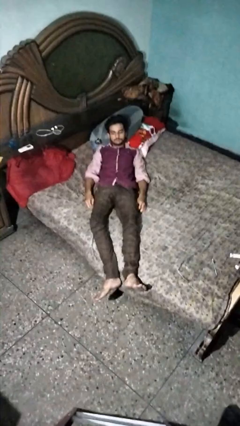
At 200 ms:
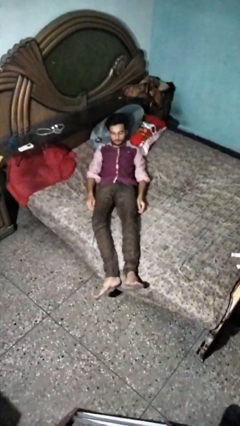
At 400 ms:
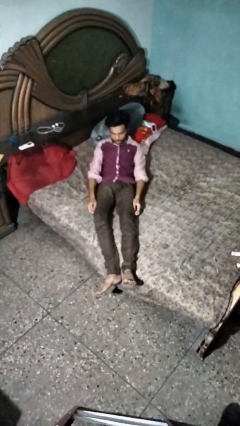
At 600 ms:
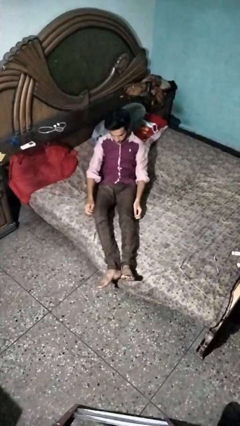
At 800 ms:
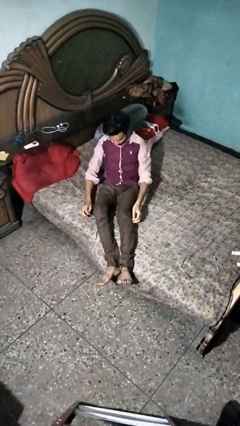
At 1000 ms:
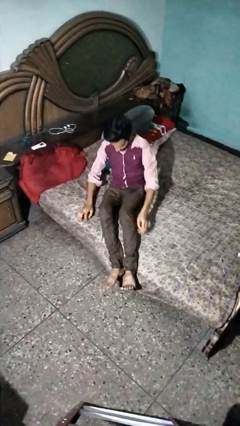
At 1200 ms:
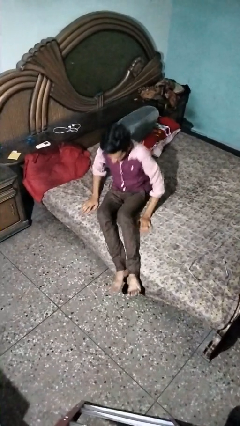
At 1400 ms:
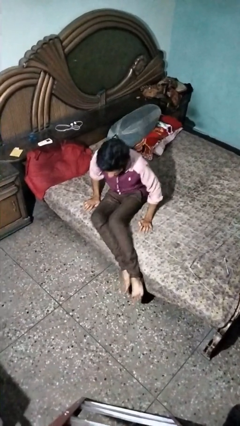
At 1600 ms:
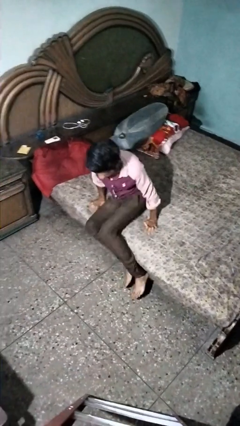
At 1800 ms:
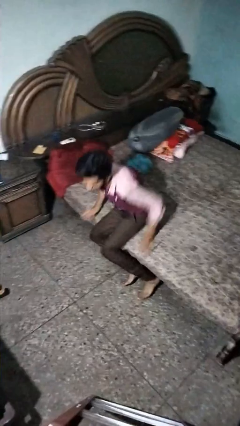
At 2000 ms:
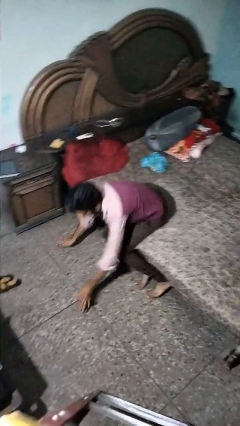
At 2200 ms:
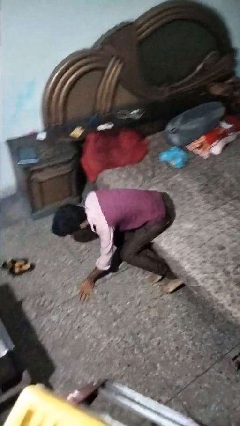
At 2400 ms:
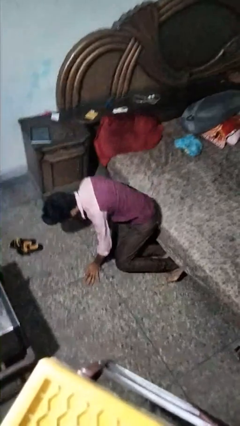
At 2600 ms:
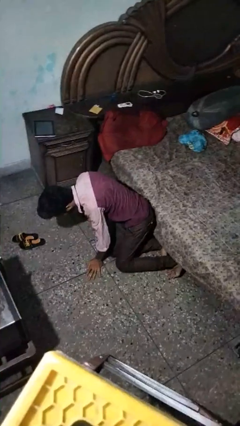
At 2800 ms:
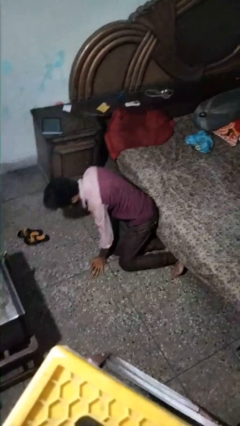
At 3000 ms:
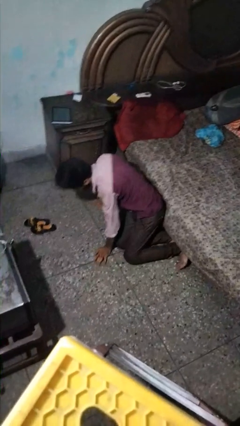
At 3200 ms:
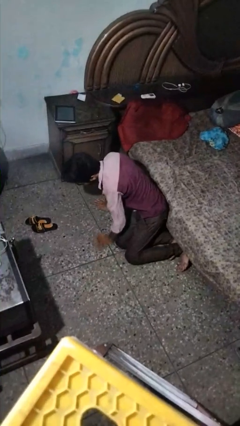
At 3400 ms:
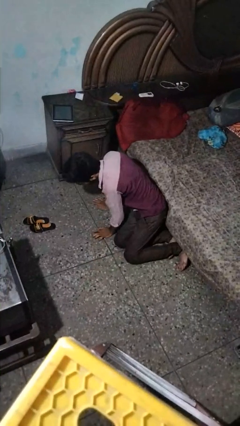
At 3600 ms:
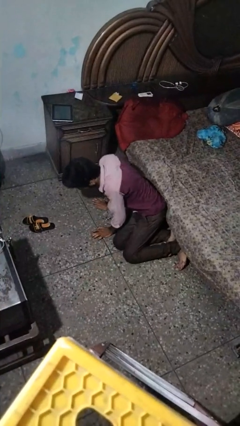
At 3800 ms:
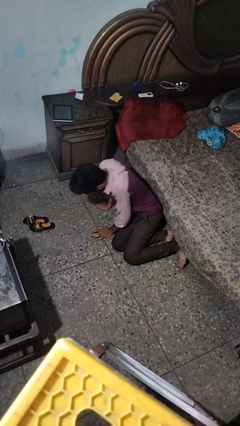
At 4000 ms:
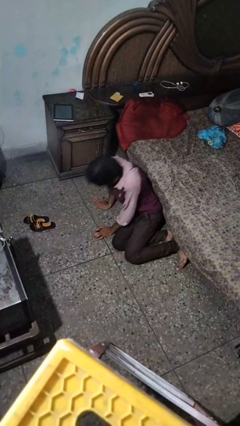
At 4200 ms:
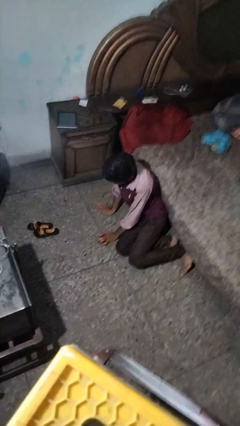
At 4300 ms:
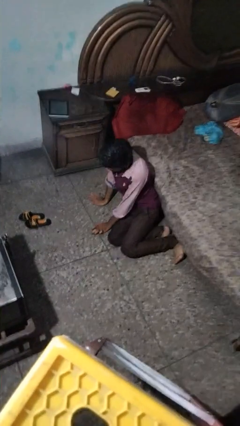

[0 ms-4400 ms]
person falls from bed

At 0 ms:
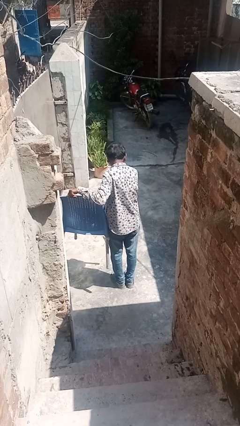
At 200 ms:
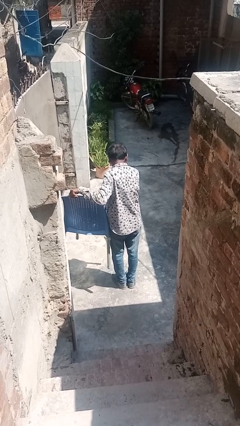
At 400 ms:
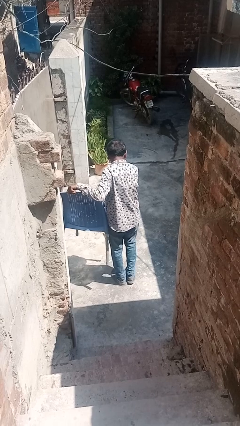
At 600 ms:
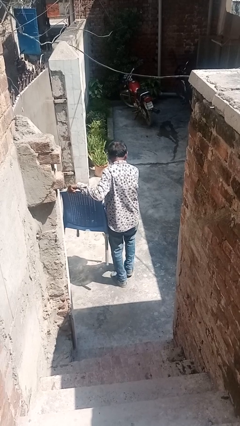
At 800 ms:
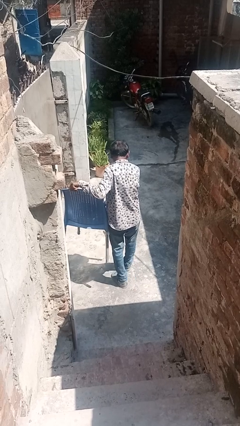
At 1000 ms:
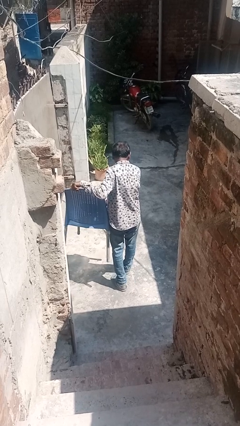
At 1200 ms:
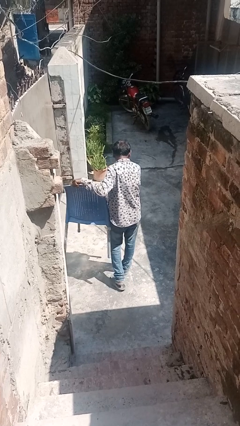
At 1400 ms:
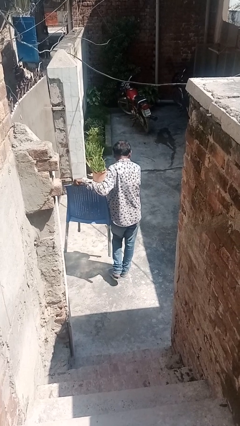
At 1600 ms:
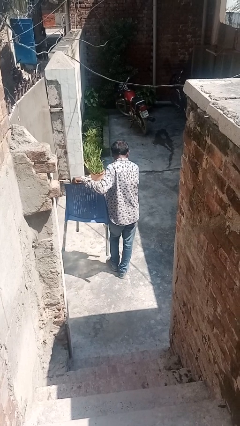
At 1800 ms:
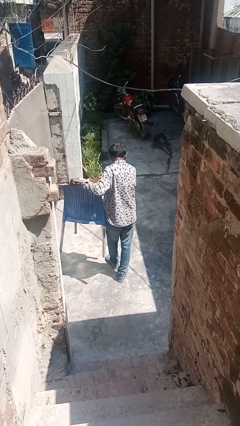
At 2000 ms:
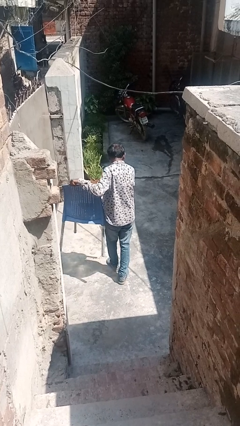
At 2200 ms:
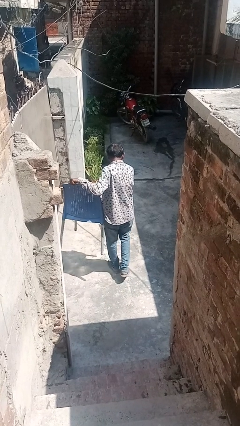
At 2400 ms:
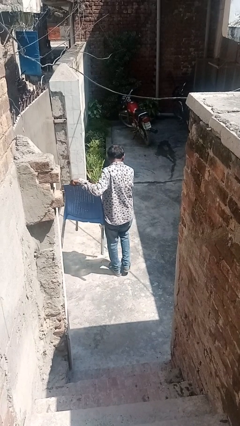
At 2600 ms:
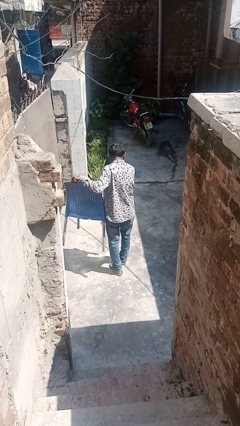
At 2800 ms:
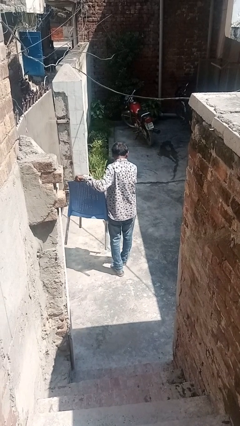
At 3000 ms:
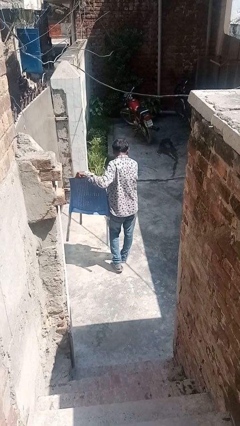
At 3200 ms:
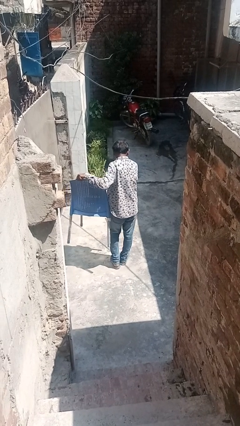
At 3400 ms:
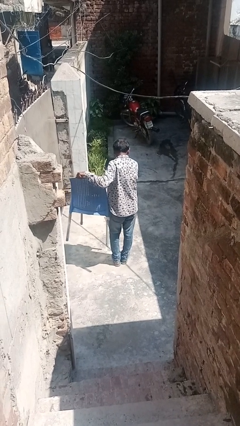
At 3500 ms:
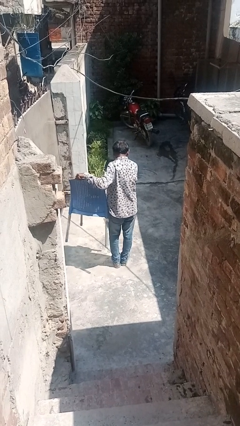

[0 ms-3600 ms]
person carries furniture

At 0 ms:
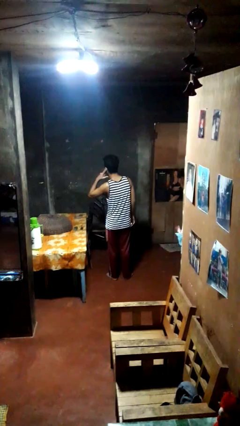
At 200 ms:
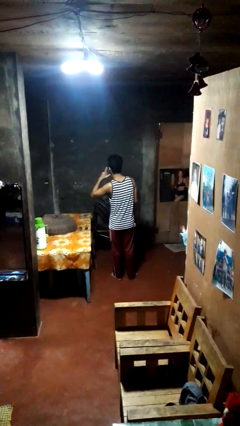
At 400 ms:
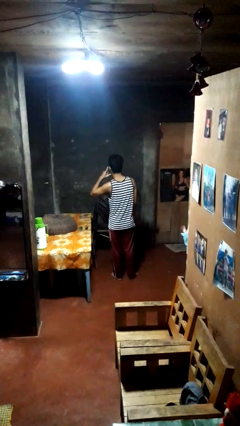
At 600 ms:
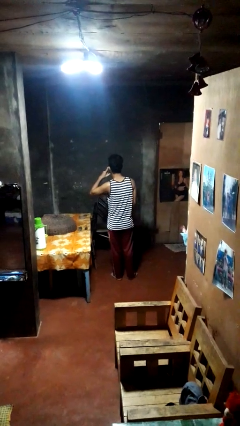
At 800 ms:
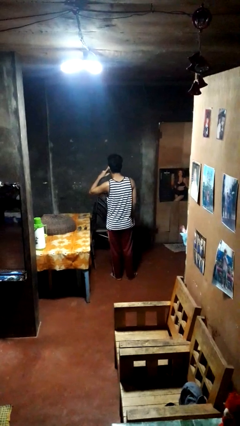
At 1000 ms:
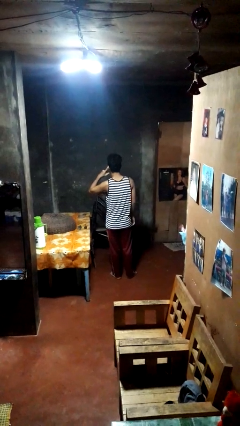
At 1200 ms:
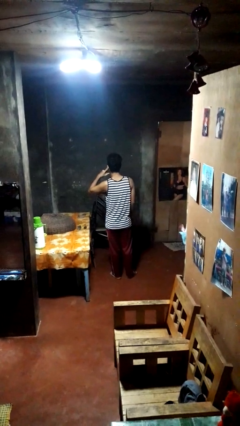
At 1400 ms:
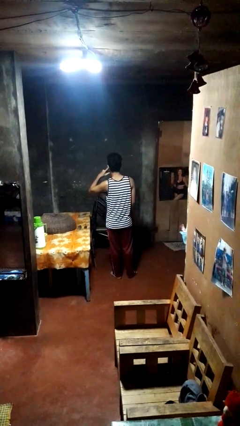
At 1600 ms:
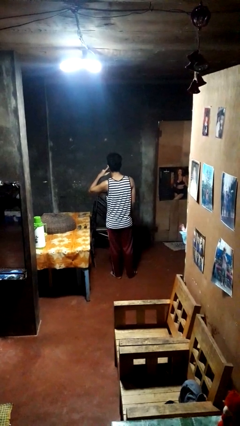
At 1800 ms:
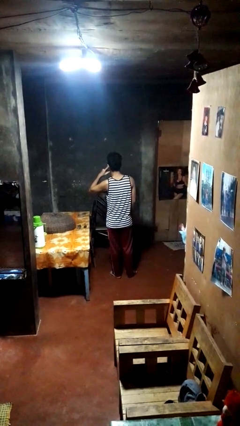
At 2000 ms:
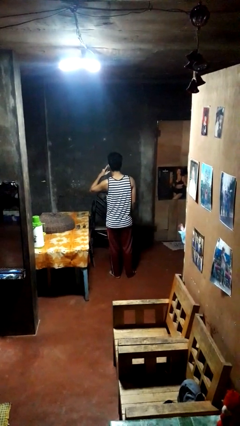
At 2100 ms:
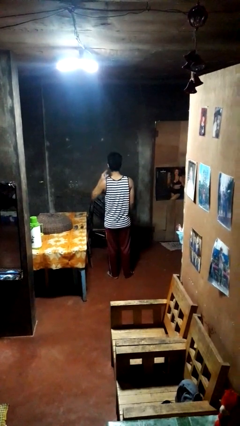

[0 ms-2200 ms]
person gestures listen closely

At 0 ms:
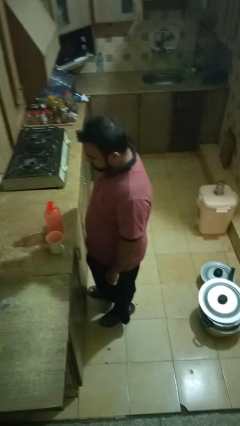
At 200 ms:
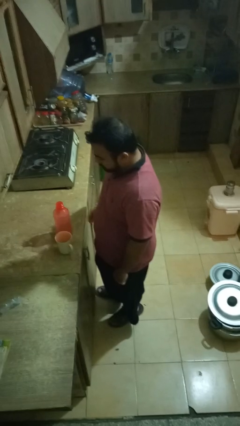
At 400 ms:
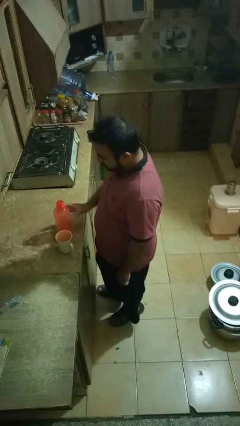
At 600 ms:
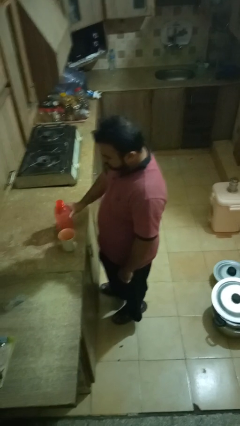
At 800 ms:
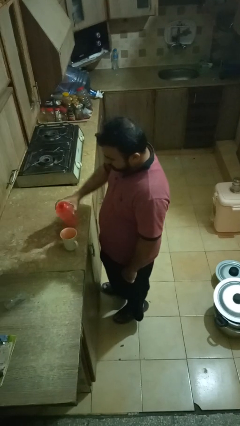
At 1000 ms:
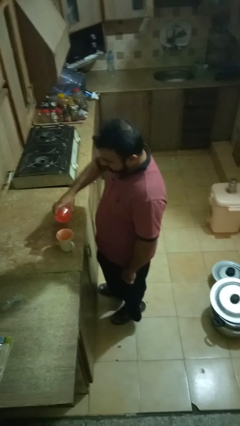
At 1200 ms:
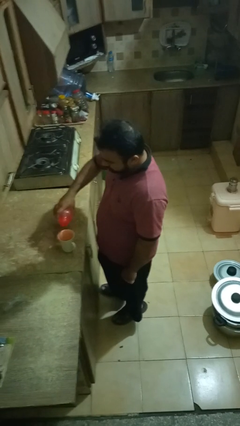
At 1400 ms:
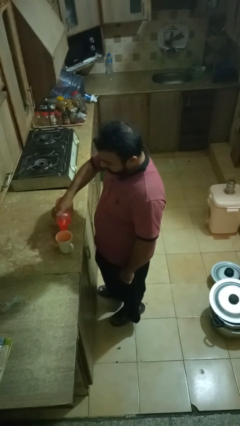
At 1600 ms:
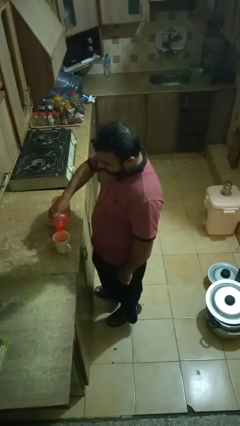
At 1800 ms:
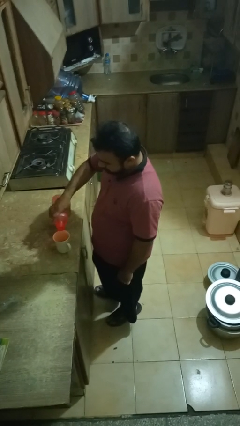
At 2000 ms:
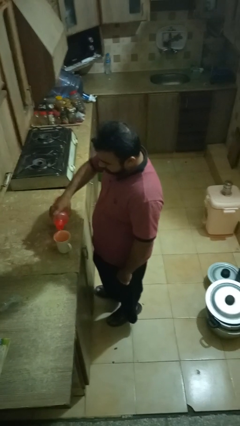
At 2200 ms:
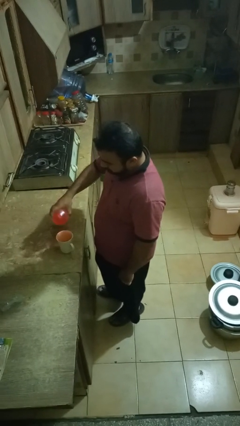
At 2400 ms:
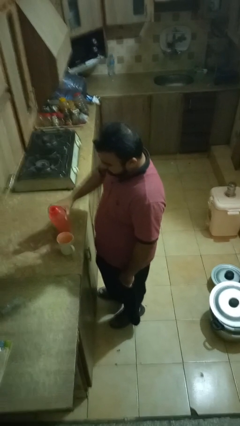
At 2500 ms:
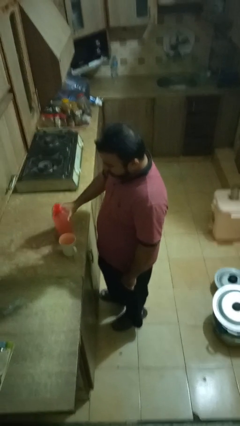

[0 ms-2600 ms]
person pours liquid into cup

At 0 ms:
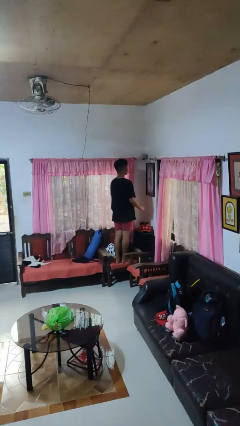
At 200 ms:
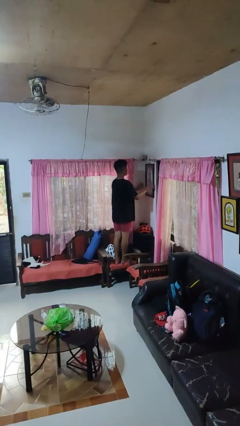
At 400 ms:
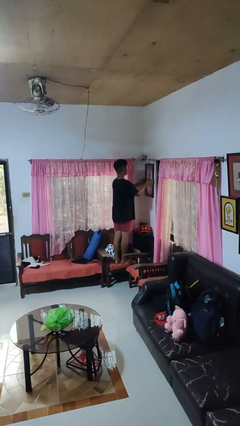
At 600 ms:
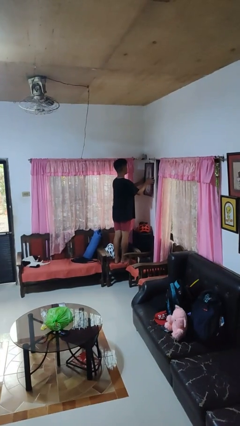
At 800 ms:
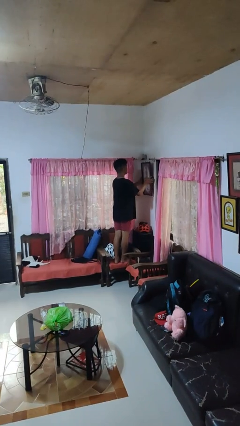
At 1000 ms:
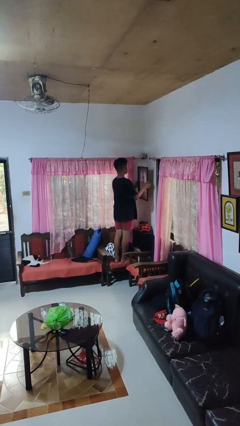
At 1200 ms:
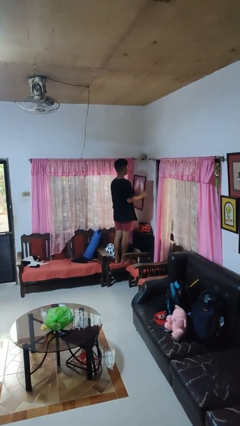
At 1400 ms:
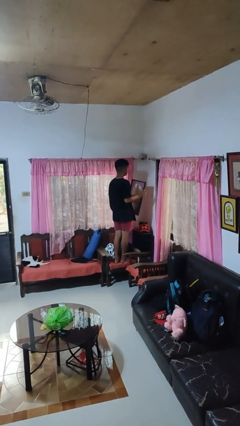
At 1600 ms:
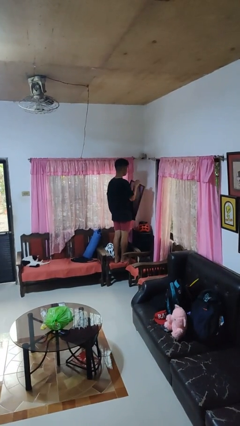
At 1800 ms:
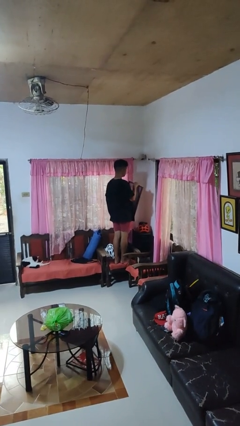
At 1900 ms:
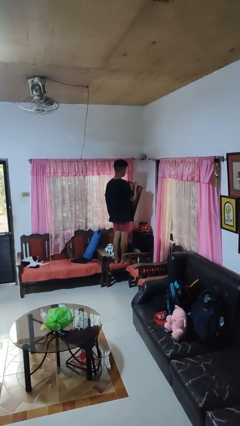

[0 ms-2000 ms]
person takes down picture frame

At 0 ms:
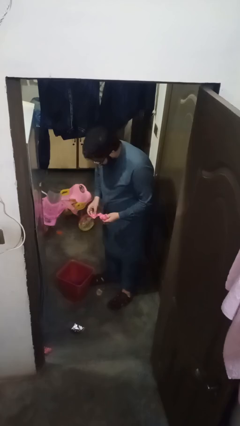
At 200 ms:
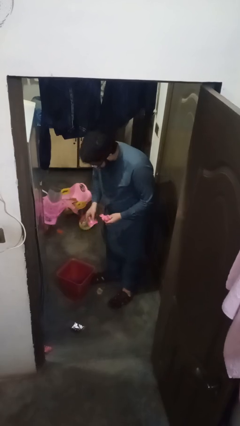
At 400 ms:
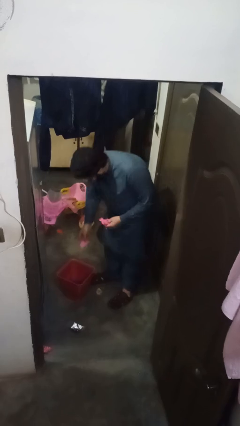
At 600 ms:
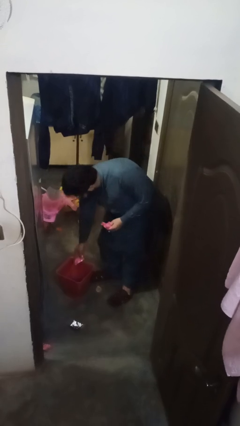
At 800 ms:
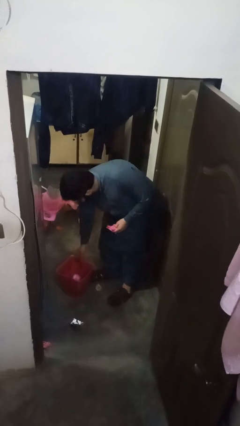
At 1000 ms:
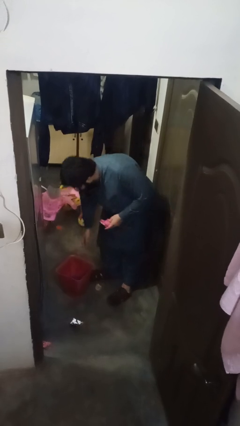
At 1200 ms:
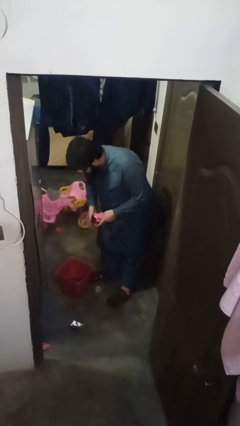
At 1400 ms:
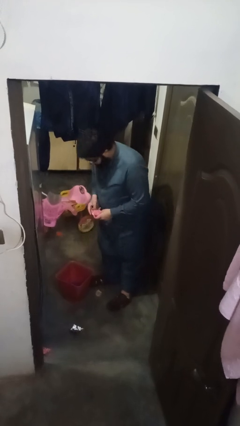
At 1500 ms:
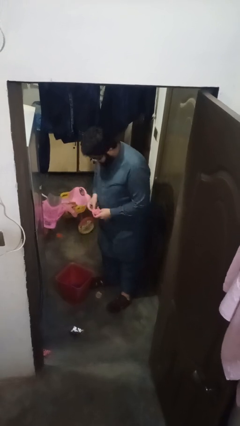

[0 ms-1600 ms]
person discards trash

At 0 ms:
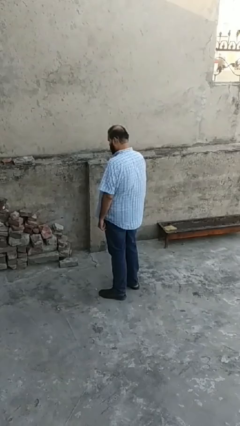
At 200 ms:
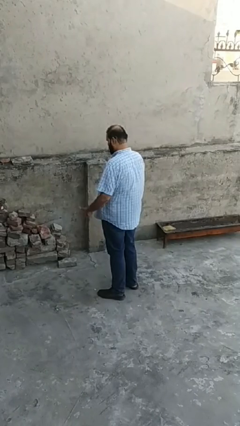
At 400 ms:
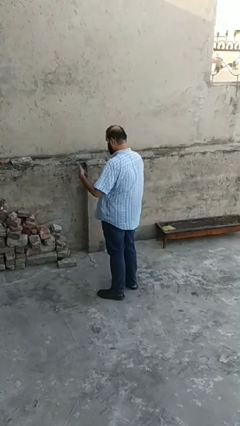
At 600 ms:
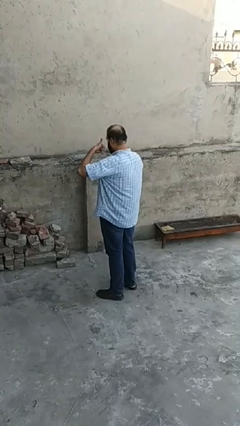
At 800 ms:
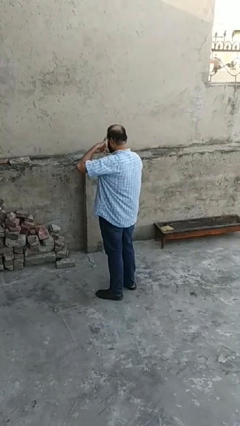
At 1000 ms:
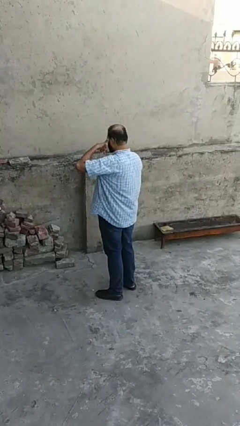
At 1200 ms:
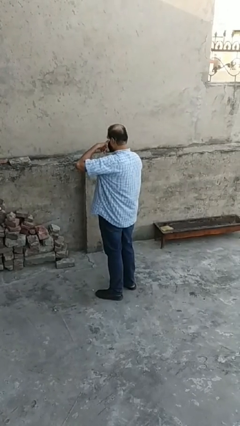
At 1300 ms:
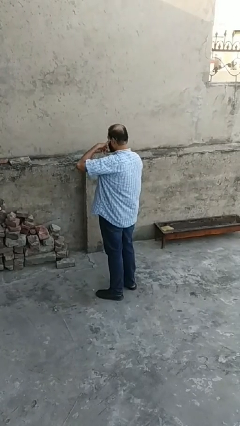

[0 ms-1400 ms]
person gestures call me
